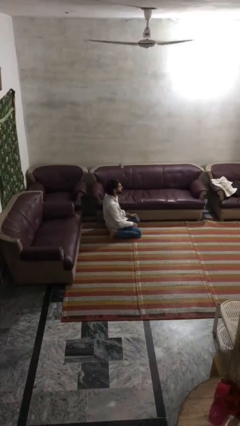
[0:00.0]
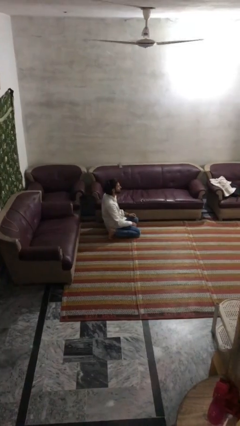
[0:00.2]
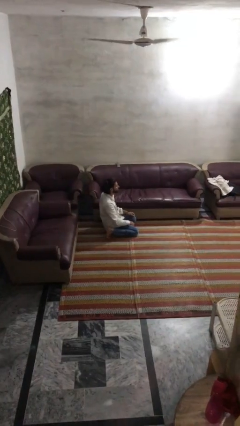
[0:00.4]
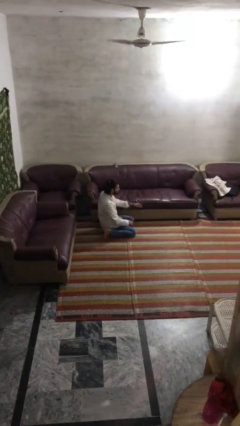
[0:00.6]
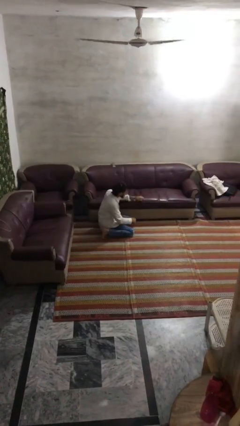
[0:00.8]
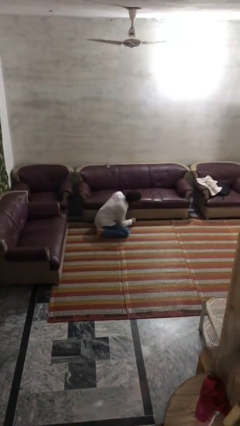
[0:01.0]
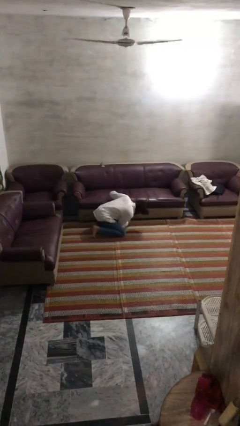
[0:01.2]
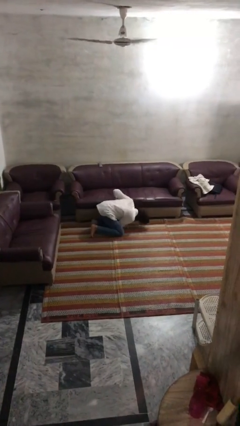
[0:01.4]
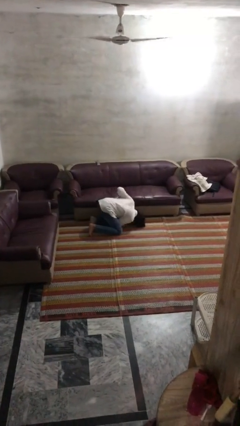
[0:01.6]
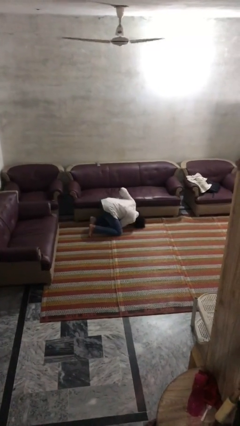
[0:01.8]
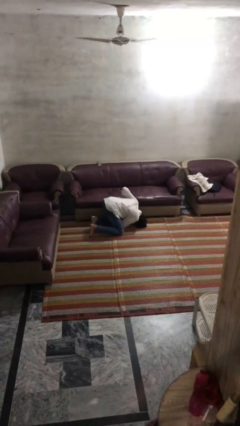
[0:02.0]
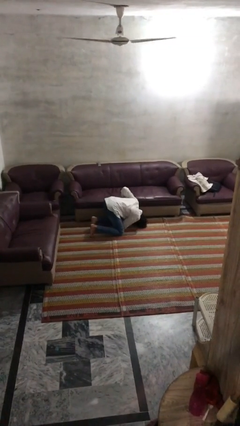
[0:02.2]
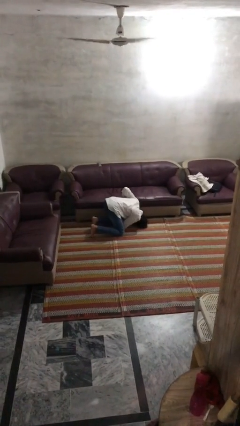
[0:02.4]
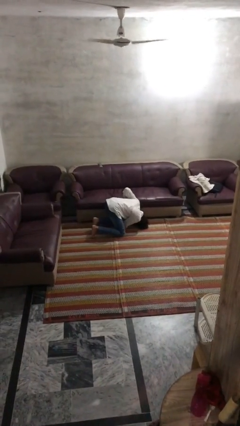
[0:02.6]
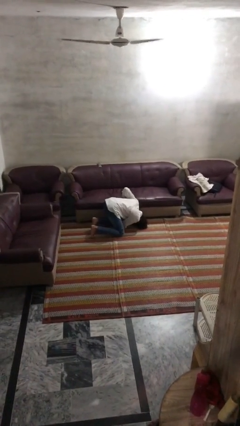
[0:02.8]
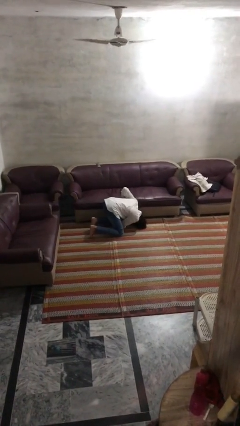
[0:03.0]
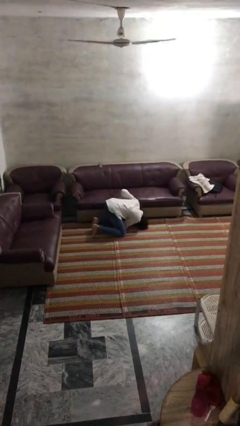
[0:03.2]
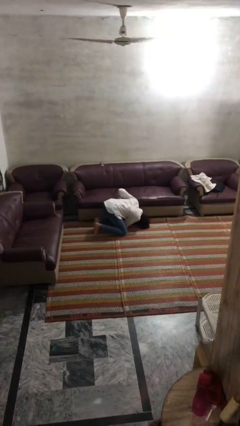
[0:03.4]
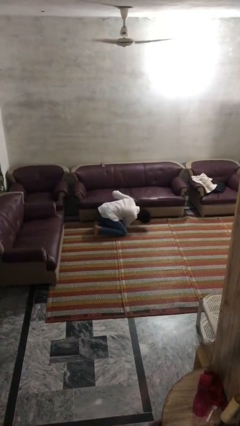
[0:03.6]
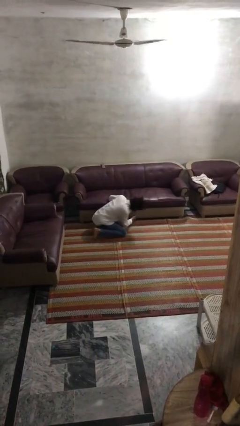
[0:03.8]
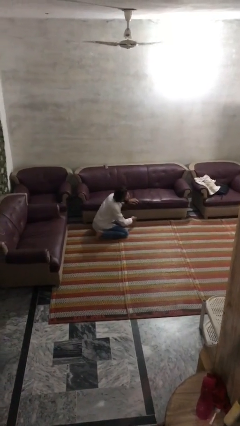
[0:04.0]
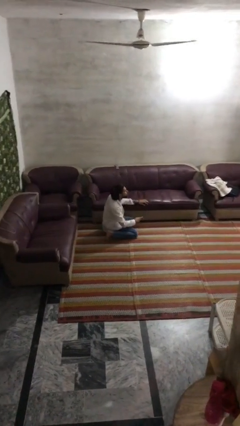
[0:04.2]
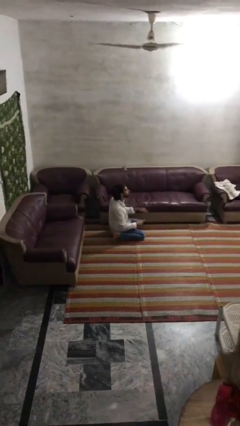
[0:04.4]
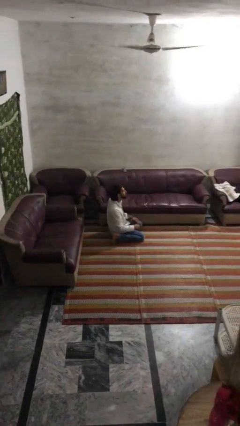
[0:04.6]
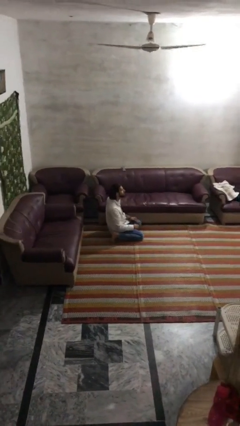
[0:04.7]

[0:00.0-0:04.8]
person searches under couch

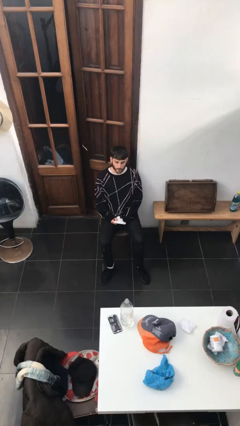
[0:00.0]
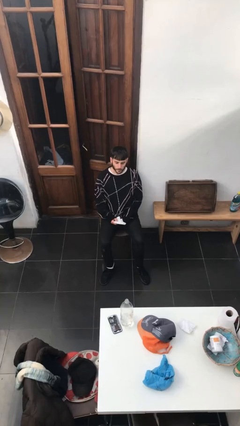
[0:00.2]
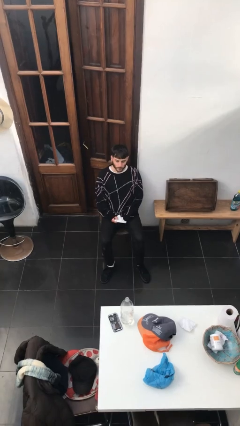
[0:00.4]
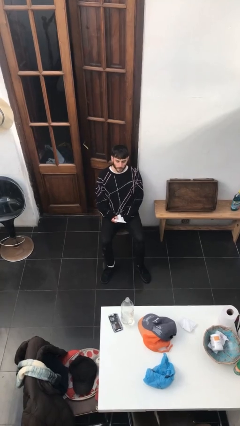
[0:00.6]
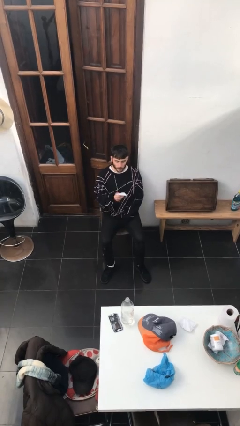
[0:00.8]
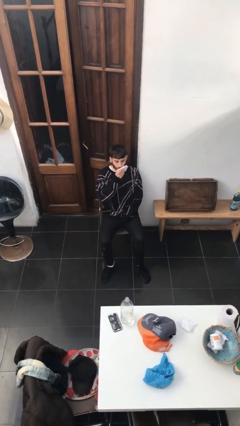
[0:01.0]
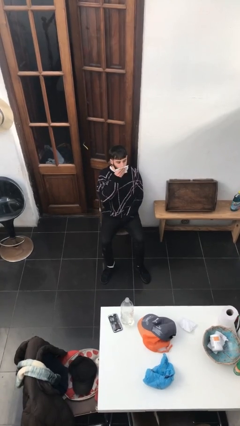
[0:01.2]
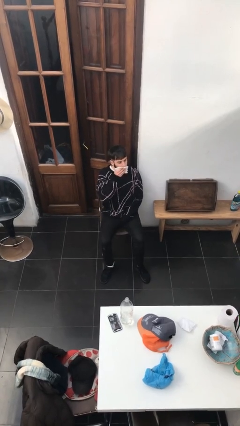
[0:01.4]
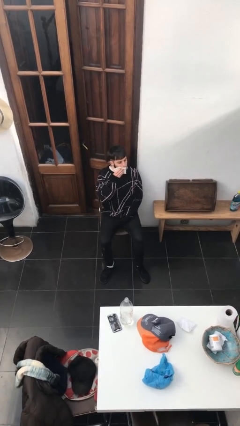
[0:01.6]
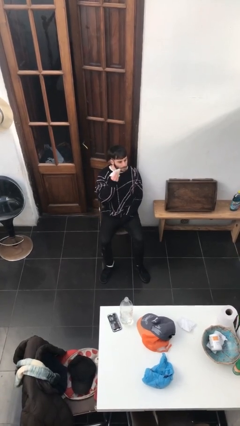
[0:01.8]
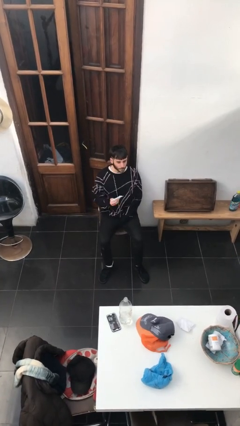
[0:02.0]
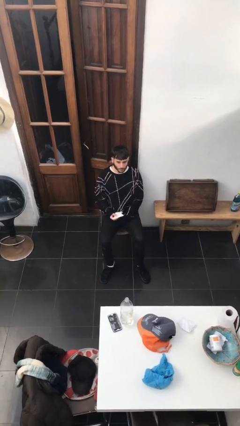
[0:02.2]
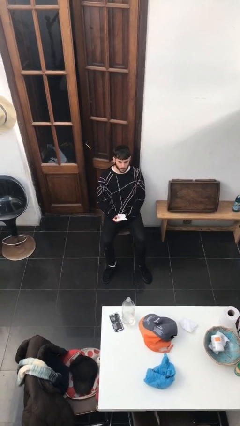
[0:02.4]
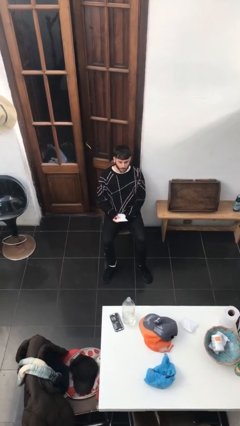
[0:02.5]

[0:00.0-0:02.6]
person wipes mouth with napkin

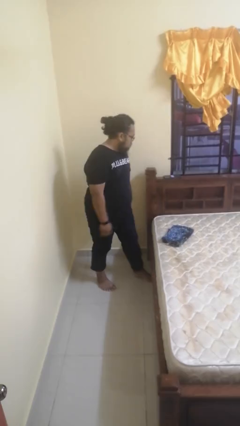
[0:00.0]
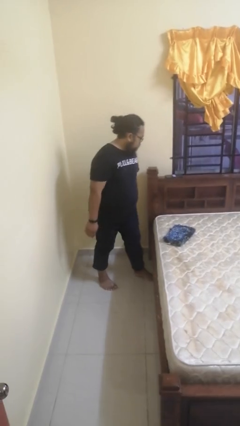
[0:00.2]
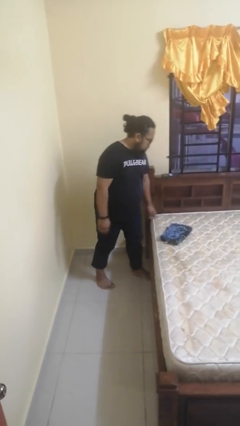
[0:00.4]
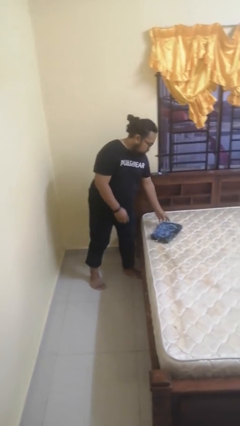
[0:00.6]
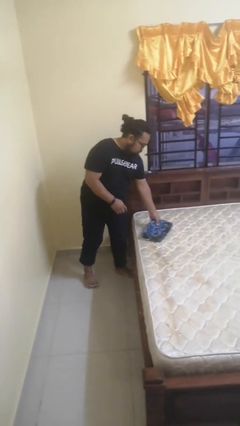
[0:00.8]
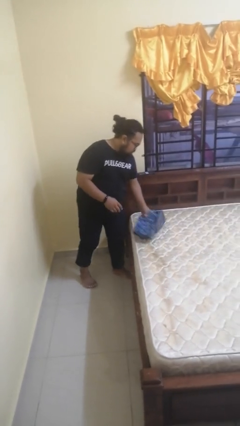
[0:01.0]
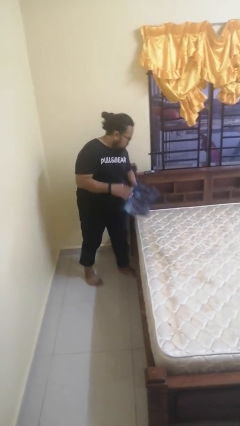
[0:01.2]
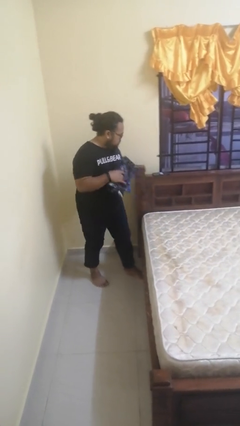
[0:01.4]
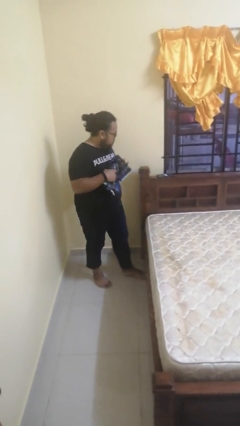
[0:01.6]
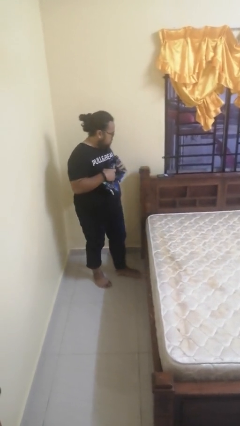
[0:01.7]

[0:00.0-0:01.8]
person picks up object from bed

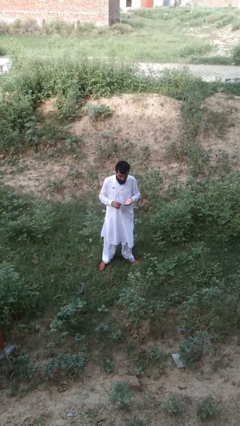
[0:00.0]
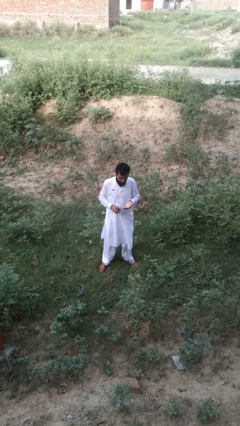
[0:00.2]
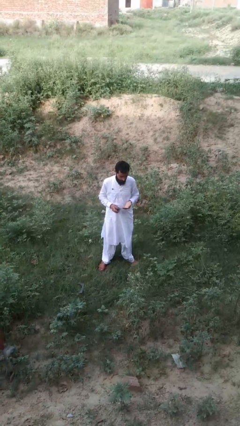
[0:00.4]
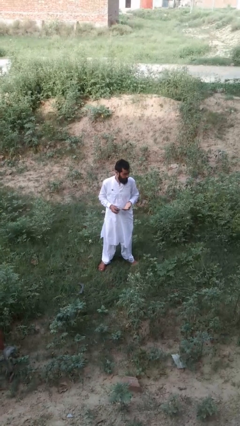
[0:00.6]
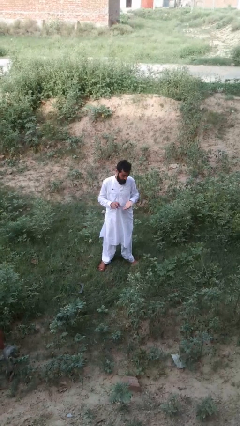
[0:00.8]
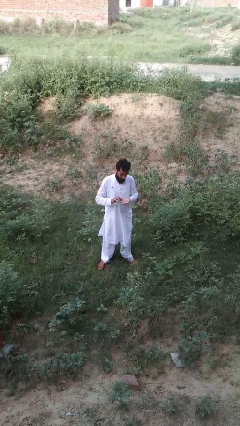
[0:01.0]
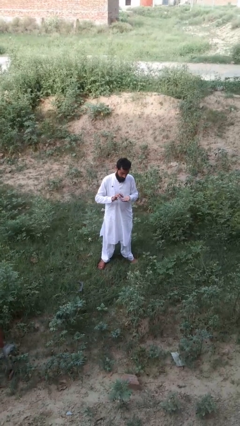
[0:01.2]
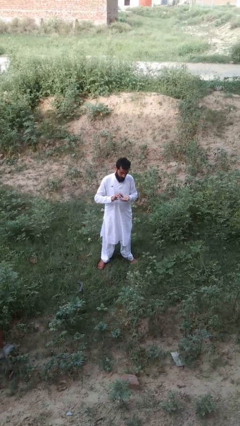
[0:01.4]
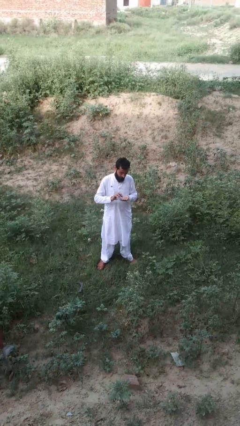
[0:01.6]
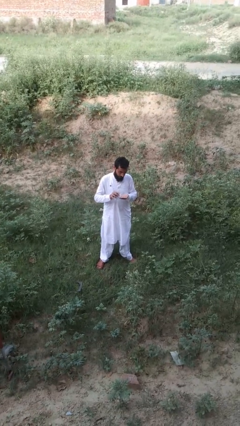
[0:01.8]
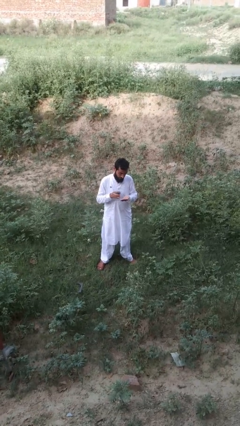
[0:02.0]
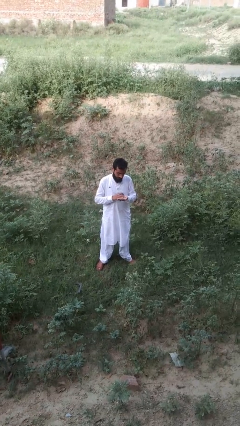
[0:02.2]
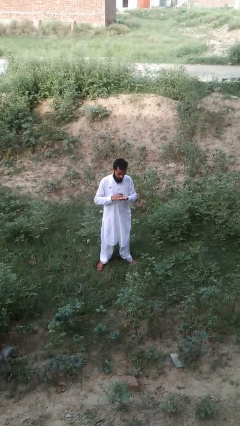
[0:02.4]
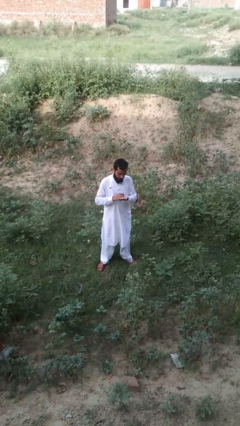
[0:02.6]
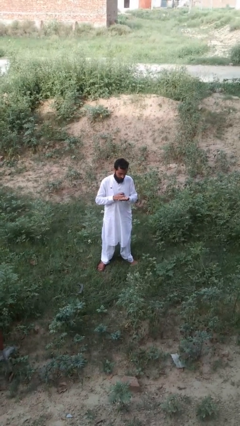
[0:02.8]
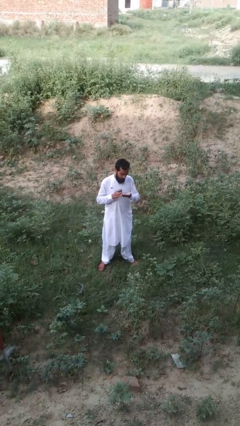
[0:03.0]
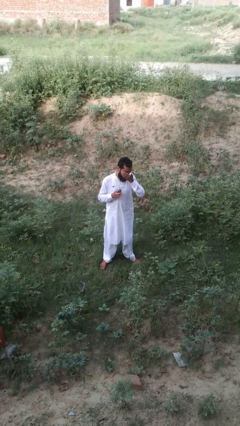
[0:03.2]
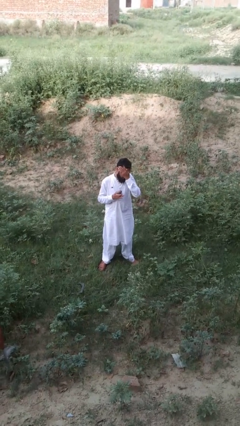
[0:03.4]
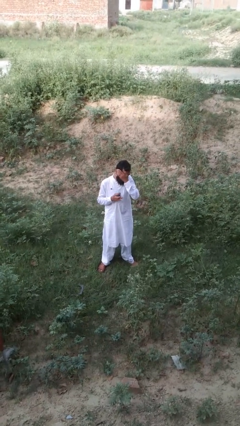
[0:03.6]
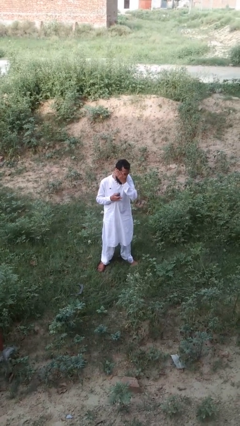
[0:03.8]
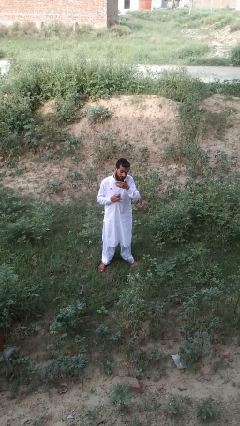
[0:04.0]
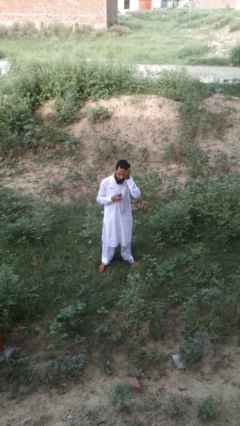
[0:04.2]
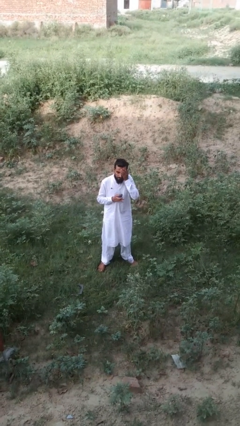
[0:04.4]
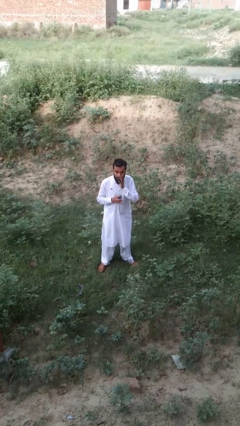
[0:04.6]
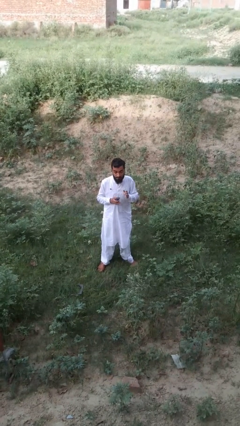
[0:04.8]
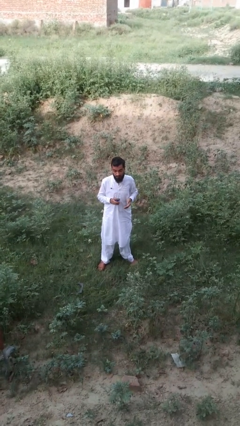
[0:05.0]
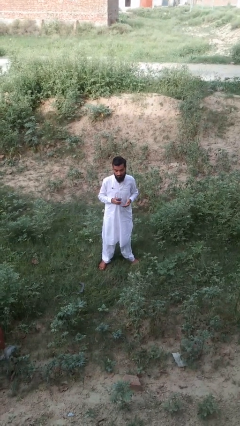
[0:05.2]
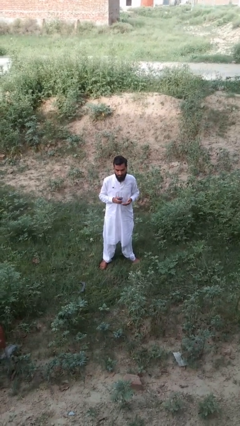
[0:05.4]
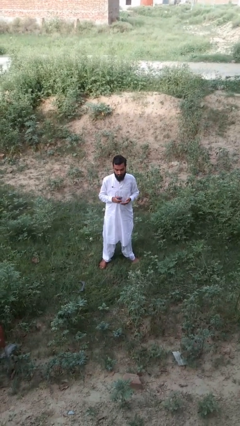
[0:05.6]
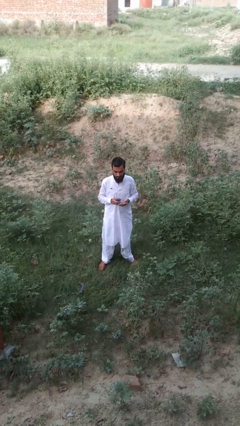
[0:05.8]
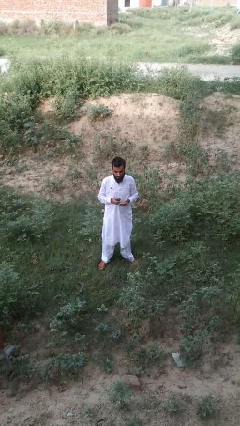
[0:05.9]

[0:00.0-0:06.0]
person applies sunscreen

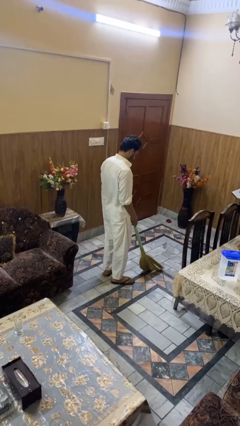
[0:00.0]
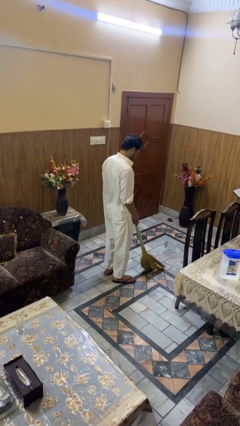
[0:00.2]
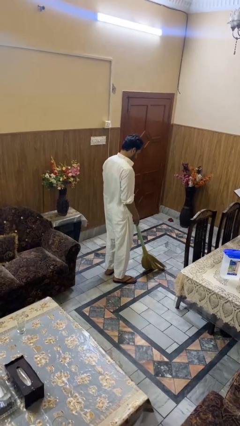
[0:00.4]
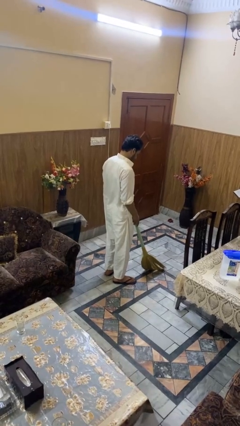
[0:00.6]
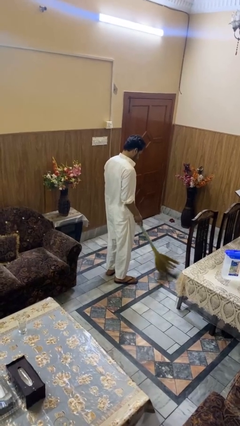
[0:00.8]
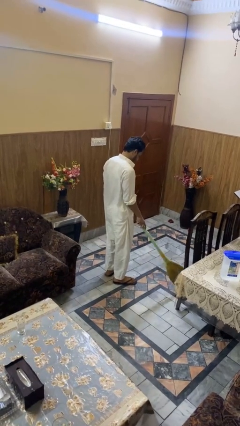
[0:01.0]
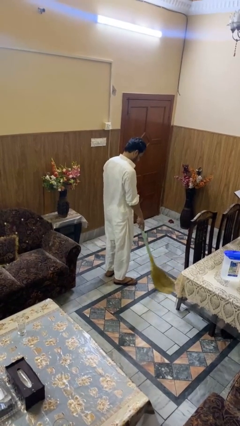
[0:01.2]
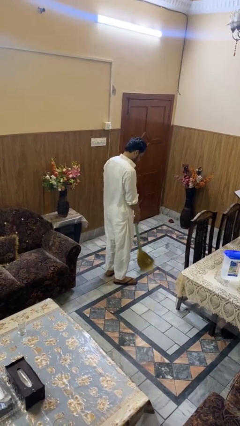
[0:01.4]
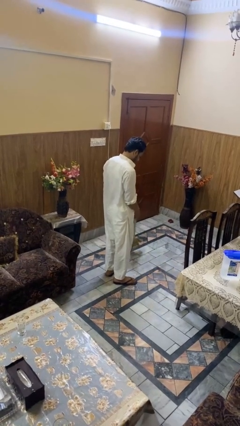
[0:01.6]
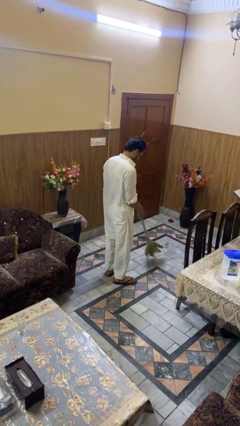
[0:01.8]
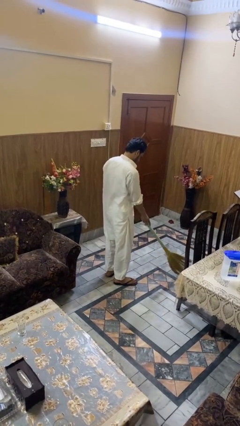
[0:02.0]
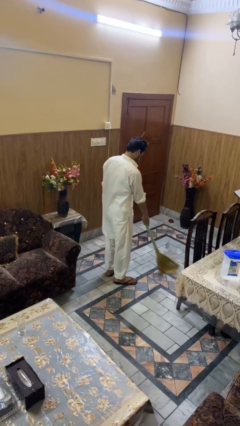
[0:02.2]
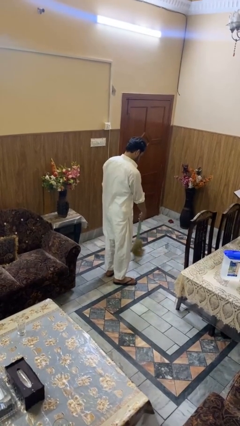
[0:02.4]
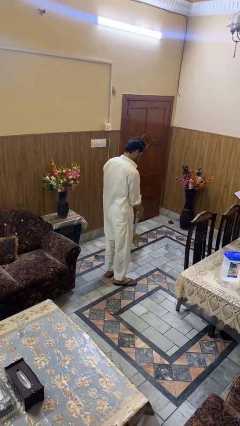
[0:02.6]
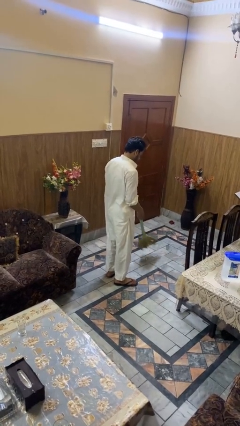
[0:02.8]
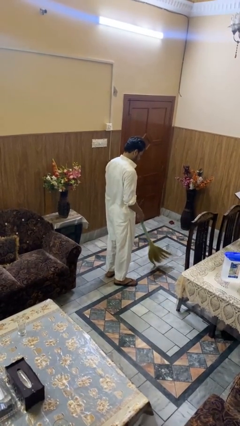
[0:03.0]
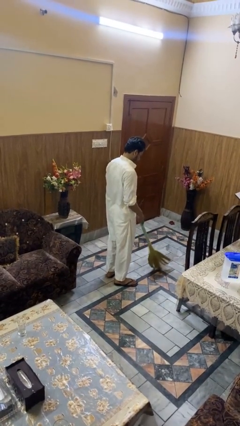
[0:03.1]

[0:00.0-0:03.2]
person sweeps floor
